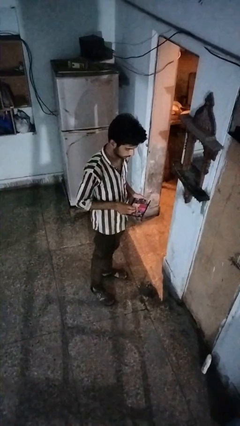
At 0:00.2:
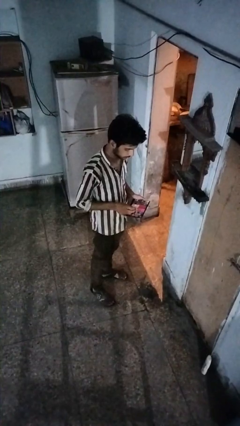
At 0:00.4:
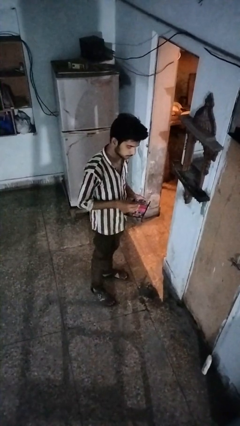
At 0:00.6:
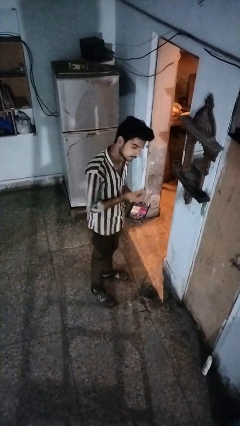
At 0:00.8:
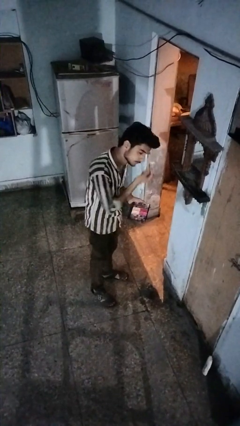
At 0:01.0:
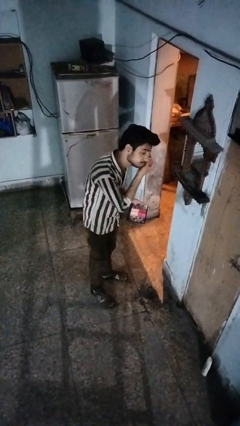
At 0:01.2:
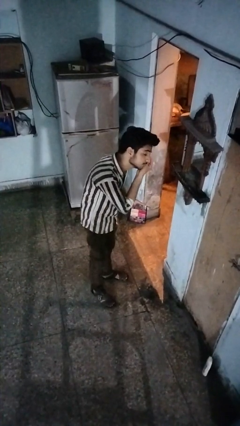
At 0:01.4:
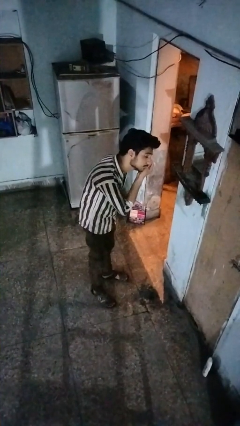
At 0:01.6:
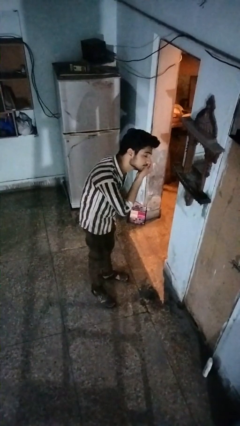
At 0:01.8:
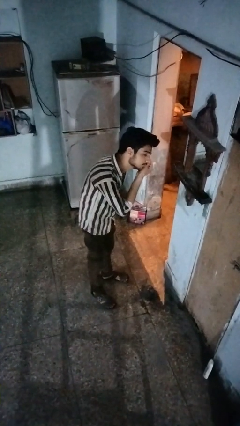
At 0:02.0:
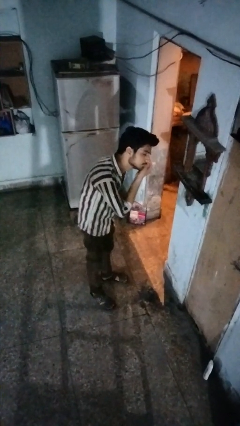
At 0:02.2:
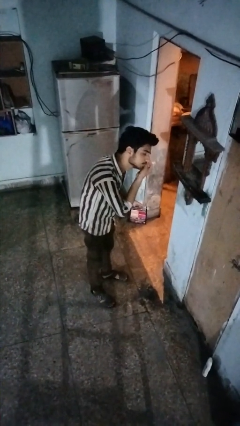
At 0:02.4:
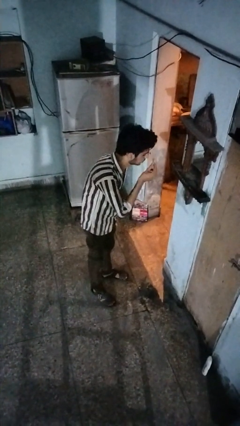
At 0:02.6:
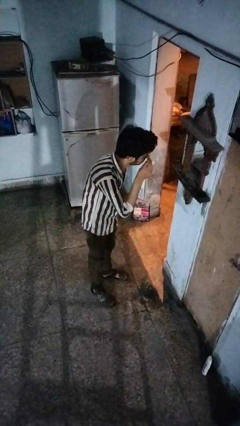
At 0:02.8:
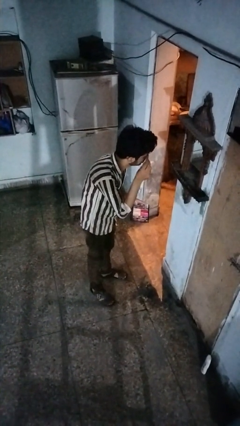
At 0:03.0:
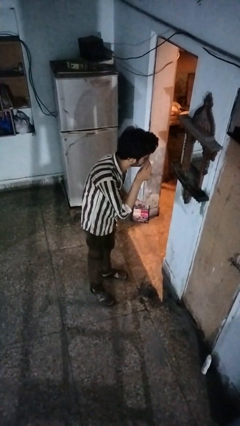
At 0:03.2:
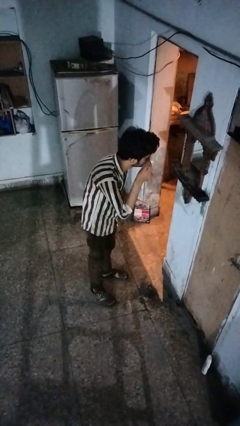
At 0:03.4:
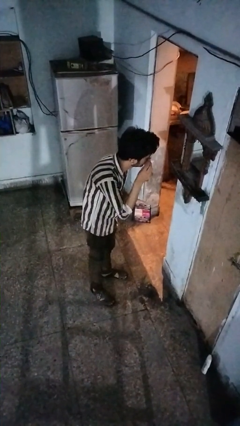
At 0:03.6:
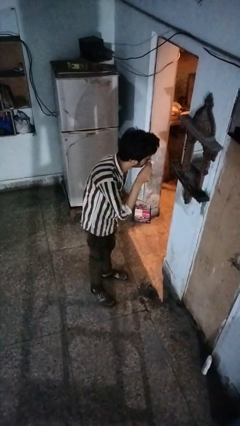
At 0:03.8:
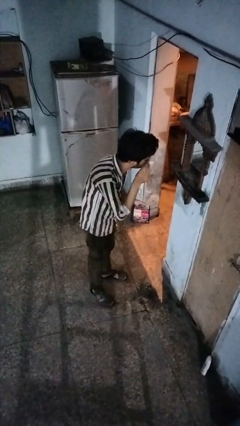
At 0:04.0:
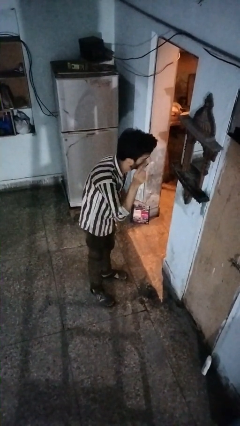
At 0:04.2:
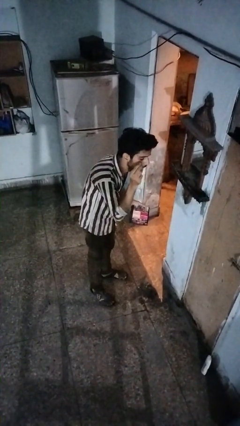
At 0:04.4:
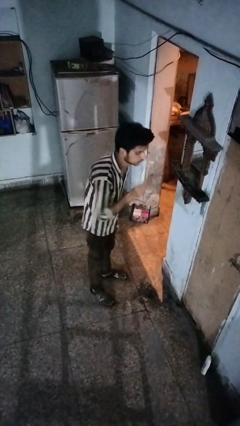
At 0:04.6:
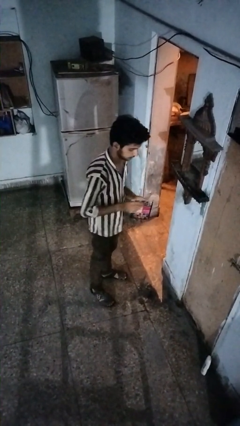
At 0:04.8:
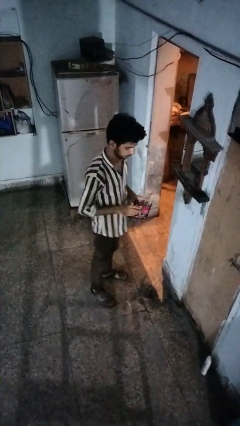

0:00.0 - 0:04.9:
person applies eye makeup

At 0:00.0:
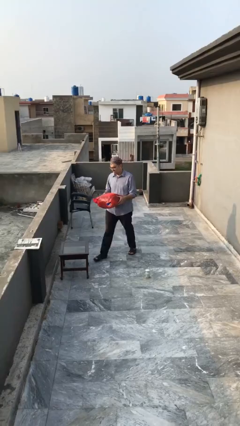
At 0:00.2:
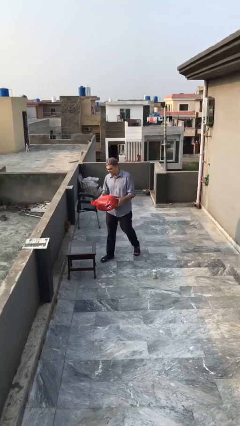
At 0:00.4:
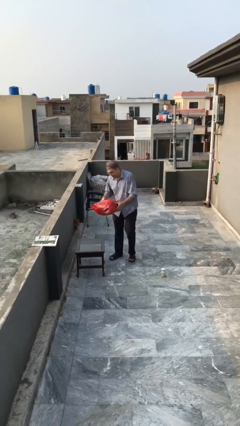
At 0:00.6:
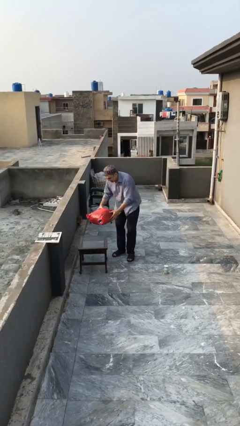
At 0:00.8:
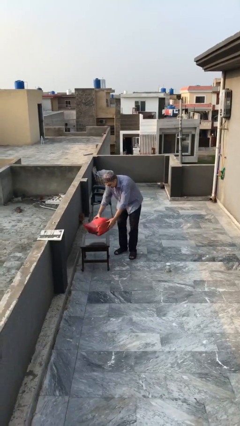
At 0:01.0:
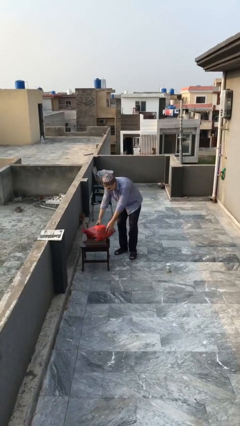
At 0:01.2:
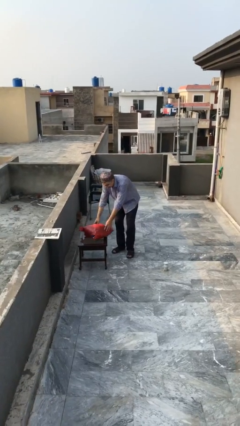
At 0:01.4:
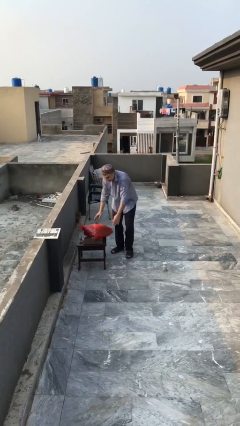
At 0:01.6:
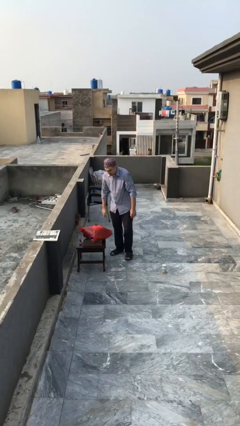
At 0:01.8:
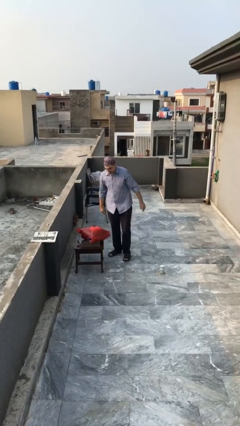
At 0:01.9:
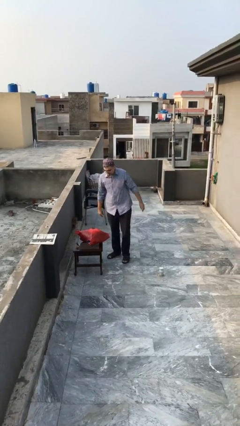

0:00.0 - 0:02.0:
person puts down object on table

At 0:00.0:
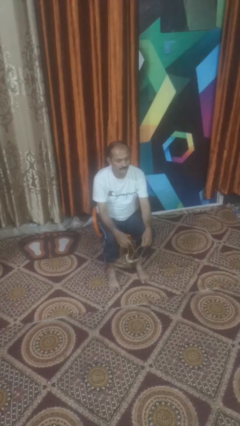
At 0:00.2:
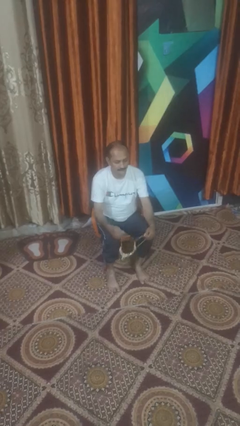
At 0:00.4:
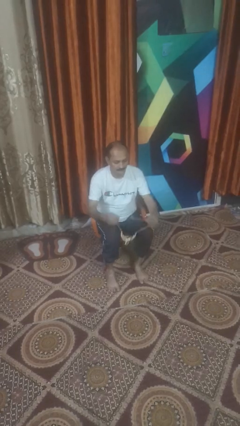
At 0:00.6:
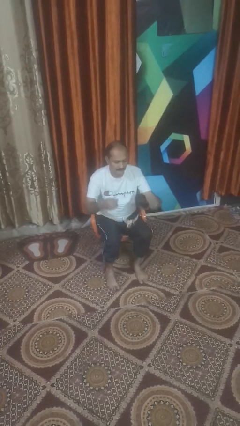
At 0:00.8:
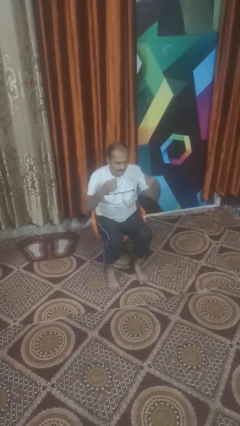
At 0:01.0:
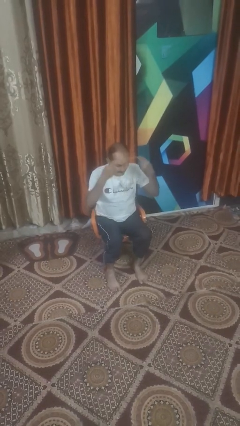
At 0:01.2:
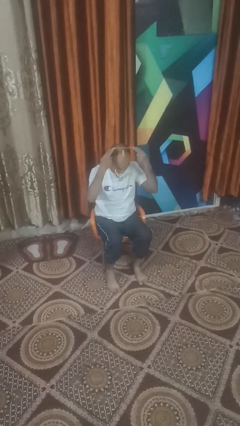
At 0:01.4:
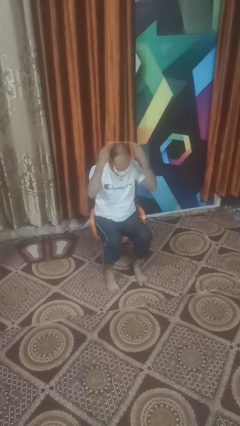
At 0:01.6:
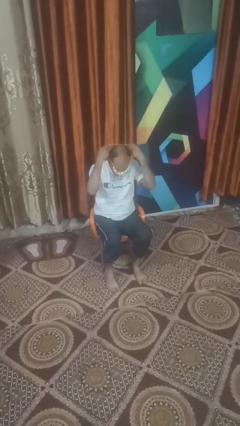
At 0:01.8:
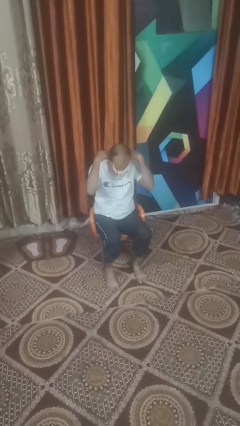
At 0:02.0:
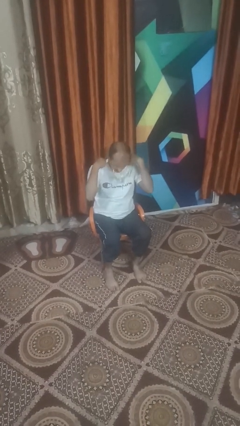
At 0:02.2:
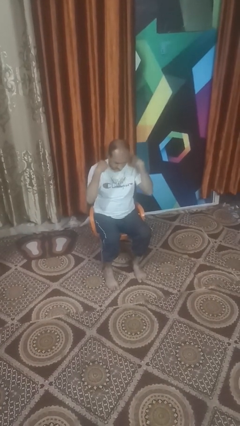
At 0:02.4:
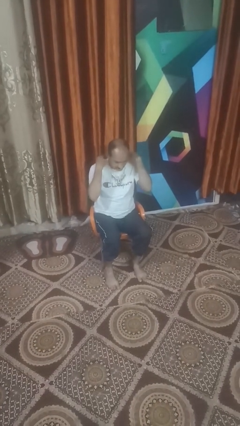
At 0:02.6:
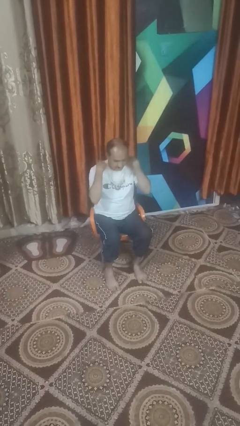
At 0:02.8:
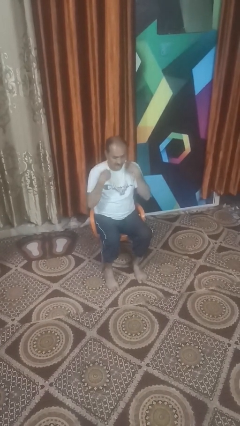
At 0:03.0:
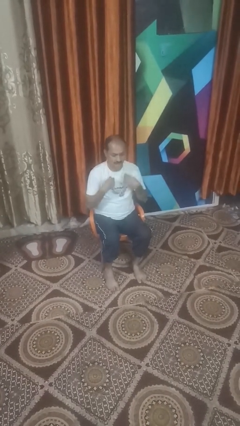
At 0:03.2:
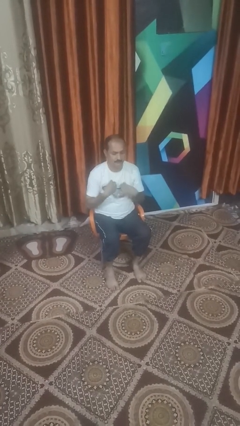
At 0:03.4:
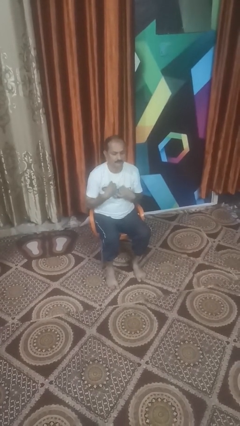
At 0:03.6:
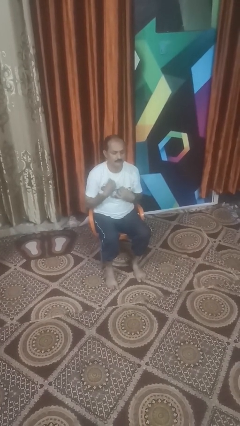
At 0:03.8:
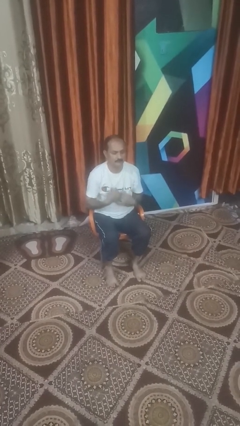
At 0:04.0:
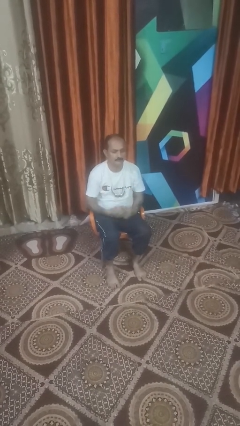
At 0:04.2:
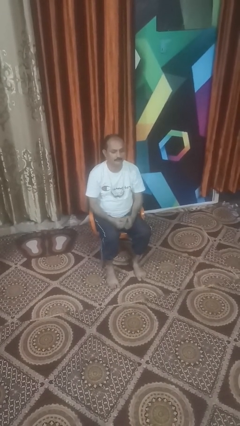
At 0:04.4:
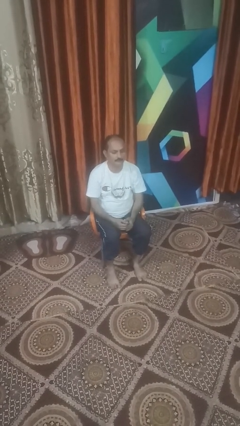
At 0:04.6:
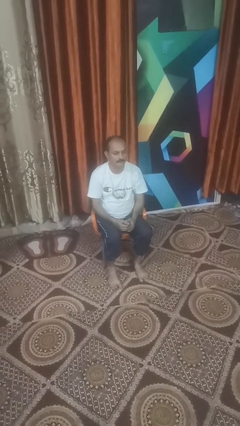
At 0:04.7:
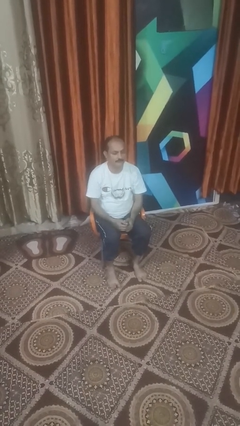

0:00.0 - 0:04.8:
person puts on necklace

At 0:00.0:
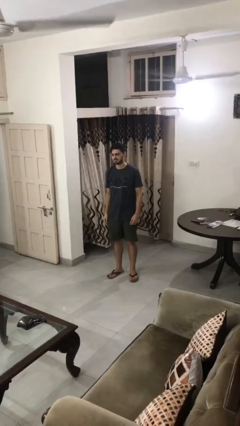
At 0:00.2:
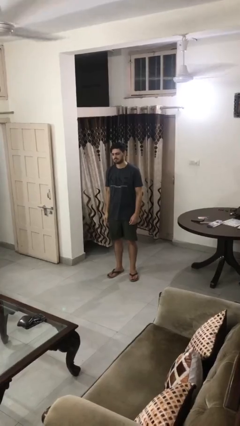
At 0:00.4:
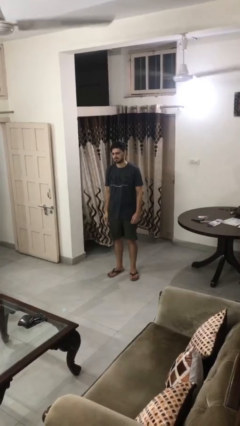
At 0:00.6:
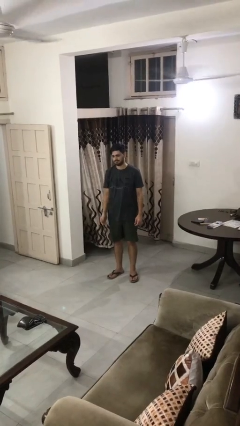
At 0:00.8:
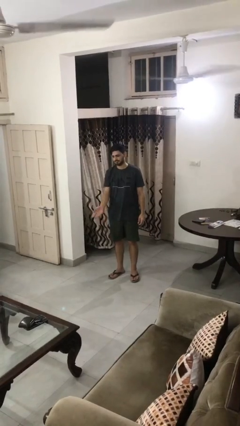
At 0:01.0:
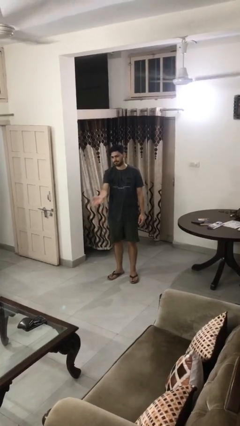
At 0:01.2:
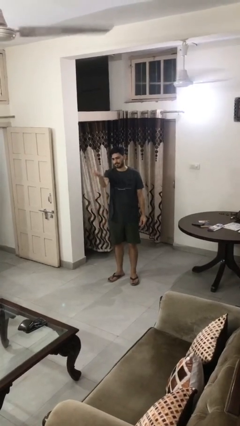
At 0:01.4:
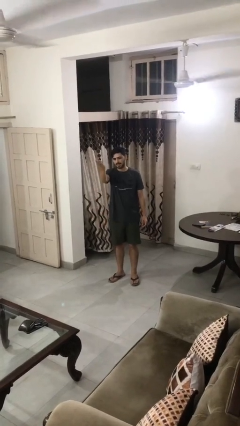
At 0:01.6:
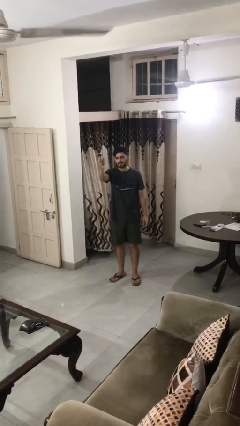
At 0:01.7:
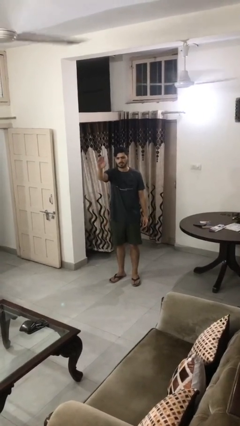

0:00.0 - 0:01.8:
person gestures swipe up

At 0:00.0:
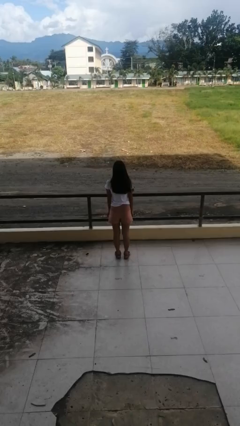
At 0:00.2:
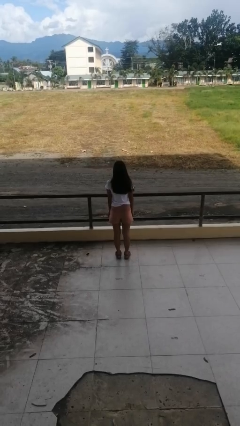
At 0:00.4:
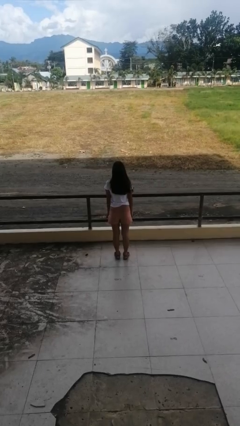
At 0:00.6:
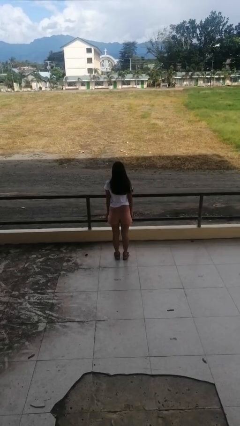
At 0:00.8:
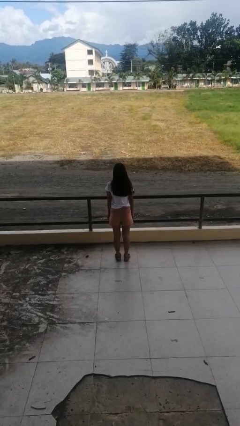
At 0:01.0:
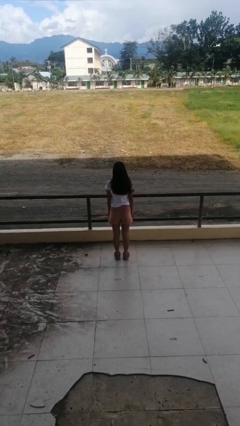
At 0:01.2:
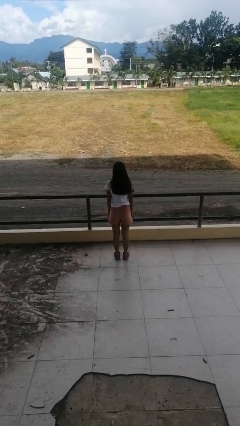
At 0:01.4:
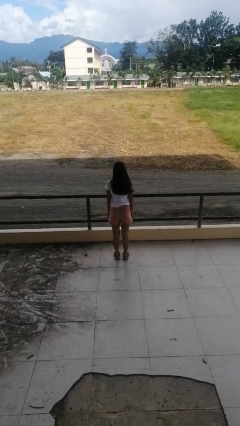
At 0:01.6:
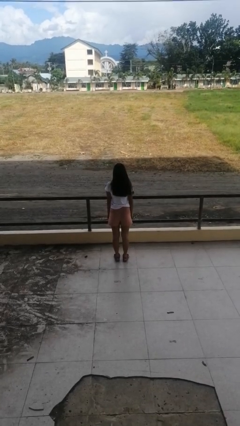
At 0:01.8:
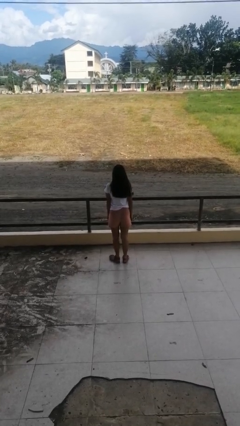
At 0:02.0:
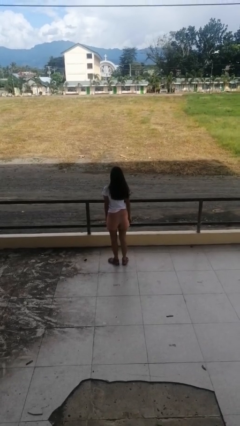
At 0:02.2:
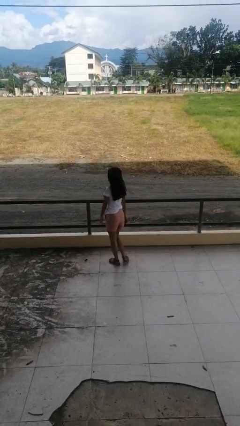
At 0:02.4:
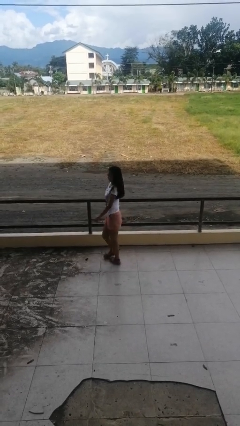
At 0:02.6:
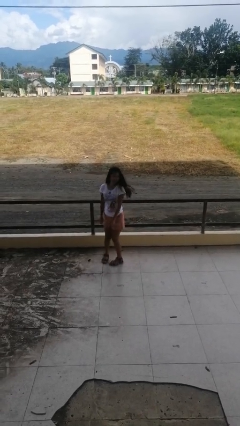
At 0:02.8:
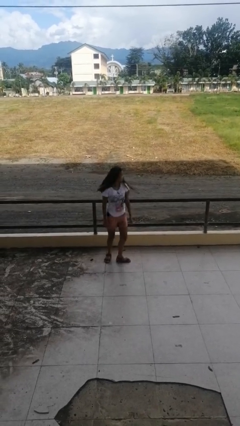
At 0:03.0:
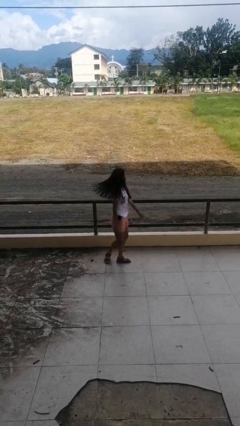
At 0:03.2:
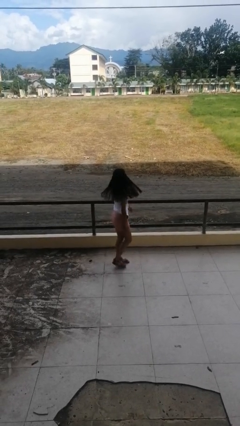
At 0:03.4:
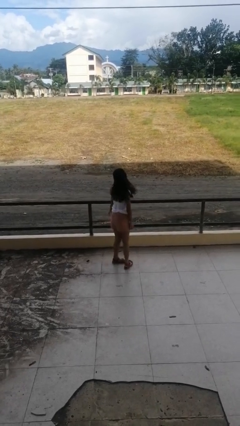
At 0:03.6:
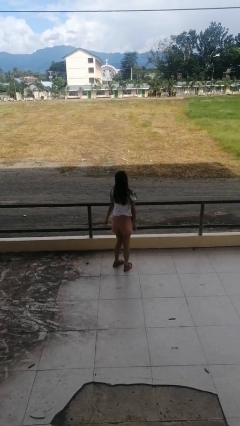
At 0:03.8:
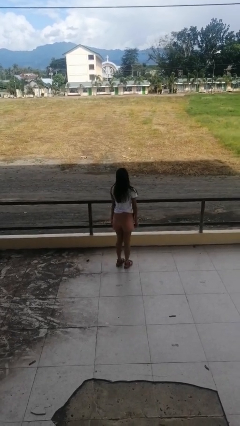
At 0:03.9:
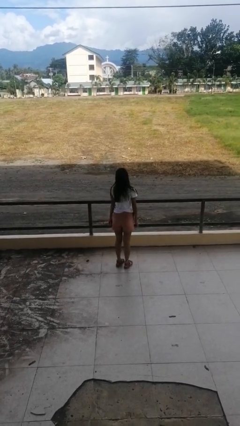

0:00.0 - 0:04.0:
person twirls
